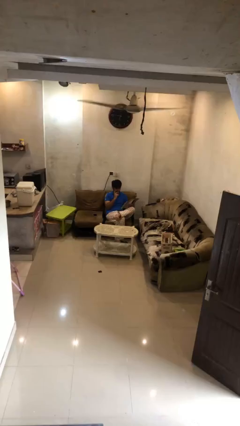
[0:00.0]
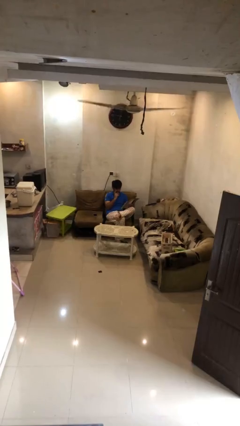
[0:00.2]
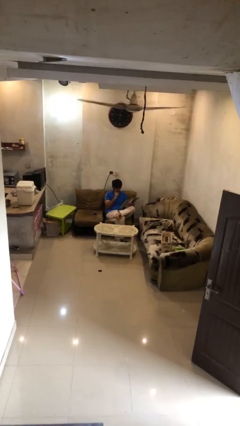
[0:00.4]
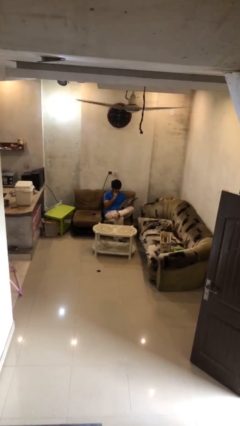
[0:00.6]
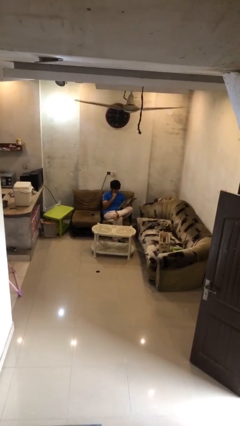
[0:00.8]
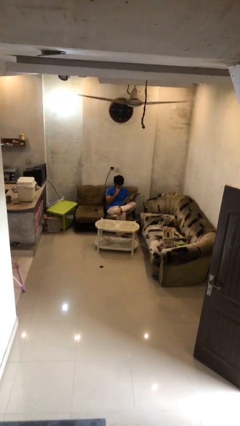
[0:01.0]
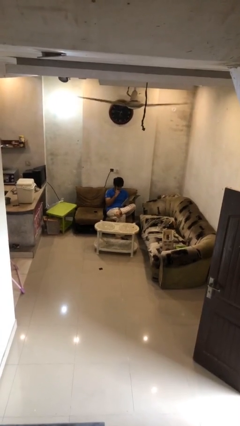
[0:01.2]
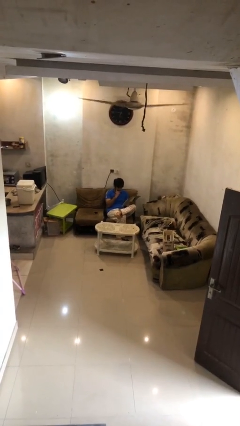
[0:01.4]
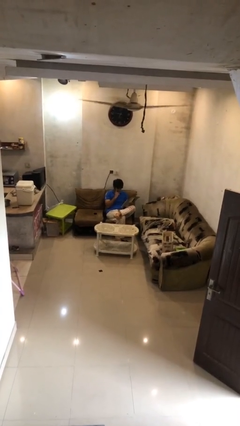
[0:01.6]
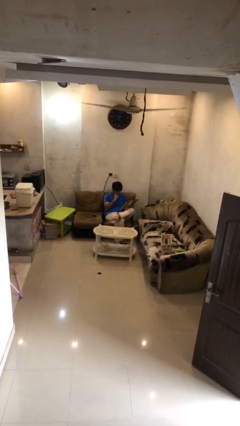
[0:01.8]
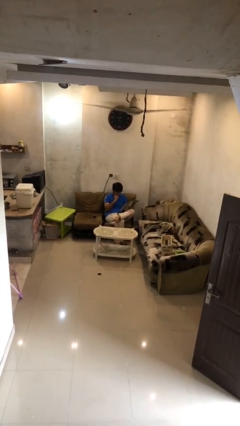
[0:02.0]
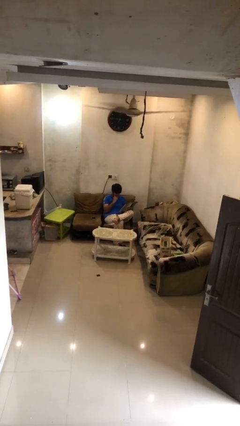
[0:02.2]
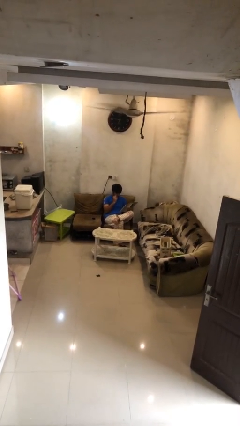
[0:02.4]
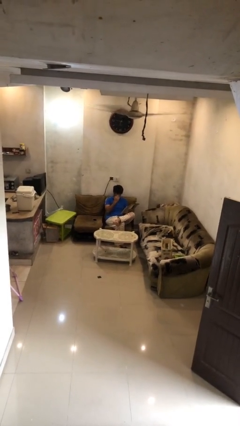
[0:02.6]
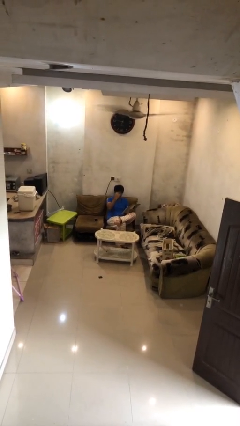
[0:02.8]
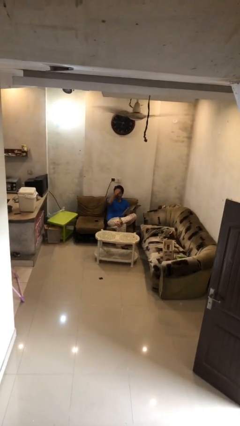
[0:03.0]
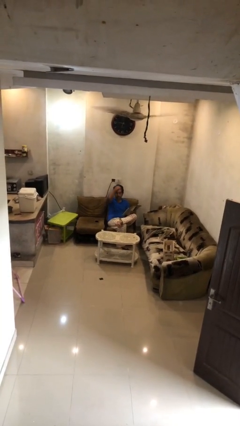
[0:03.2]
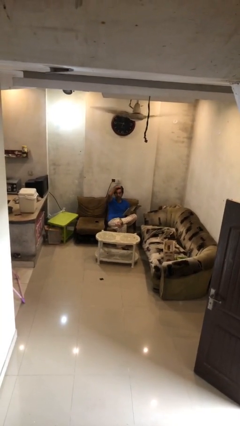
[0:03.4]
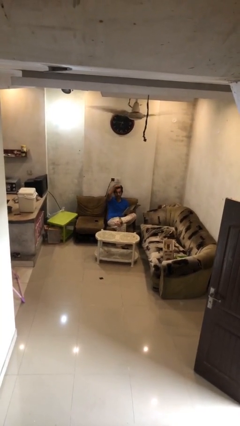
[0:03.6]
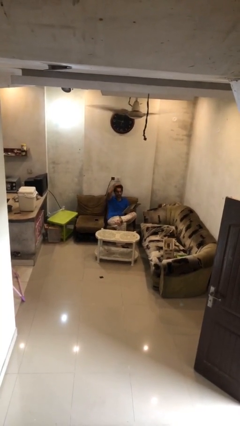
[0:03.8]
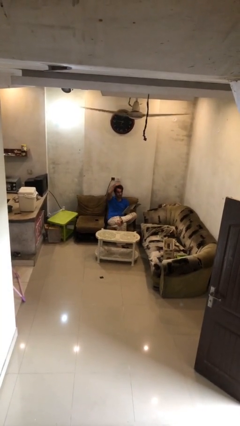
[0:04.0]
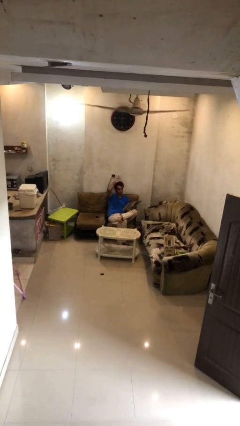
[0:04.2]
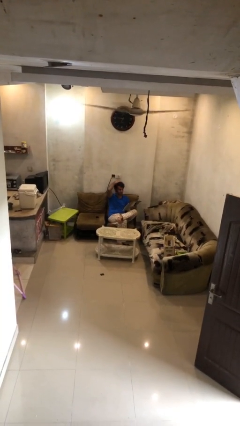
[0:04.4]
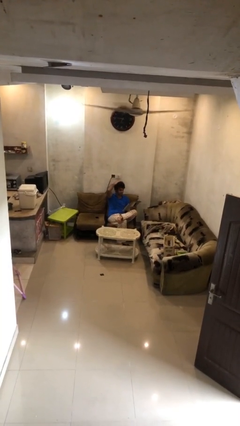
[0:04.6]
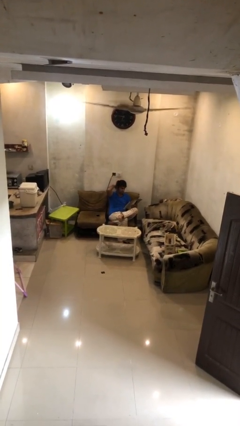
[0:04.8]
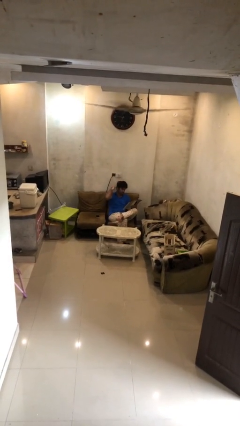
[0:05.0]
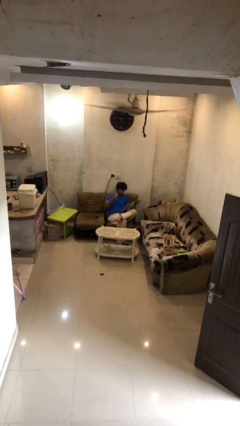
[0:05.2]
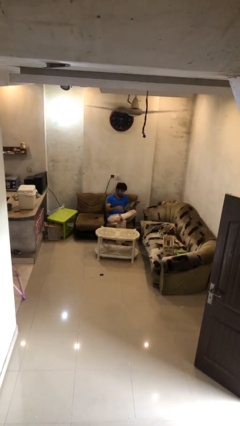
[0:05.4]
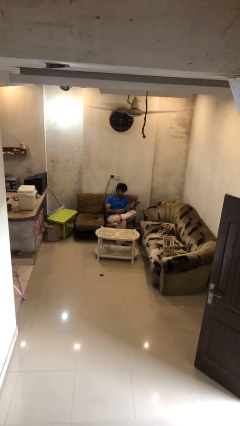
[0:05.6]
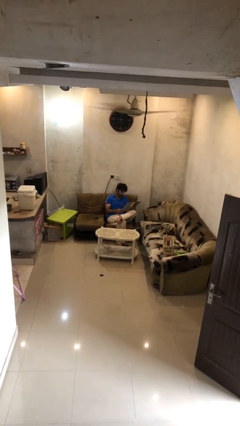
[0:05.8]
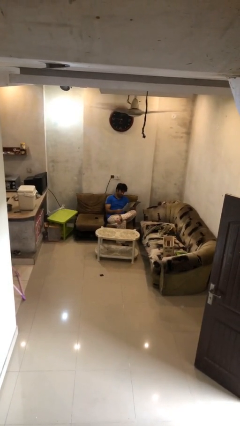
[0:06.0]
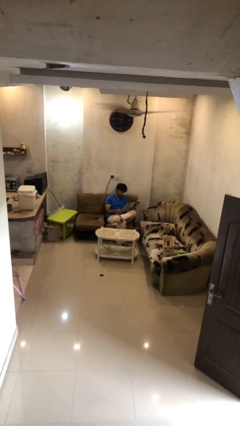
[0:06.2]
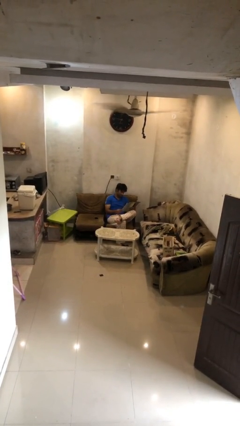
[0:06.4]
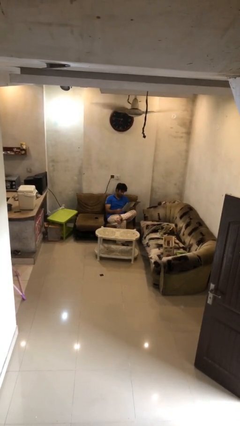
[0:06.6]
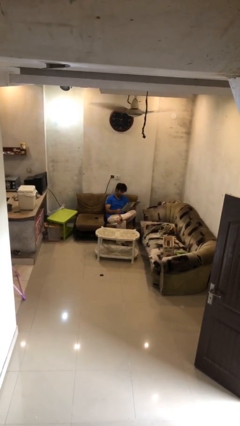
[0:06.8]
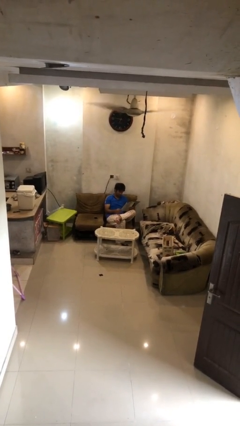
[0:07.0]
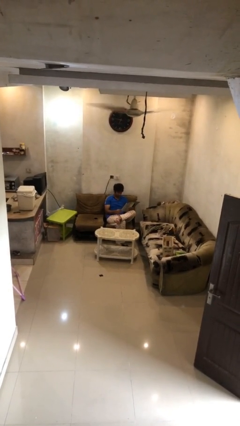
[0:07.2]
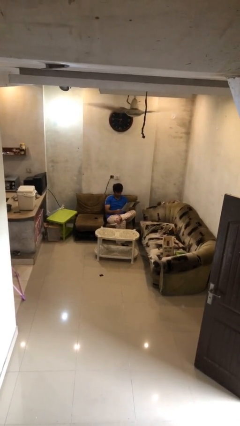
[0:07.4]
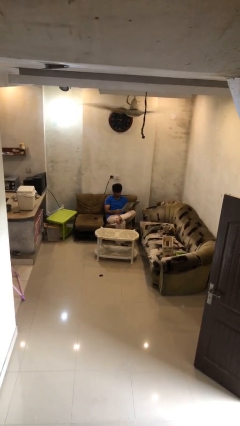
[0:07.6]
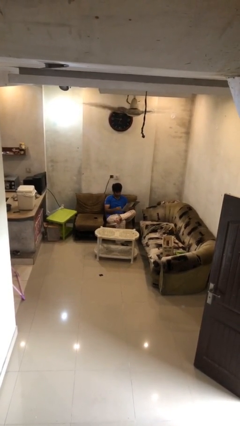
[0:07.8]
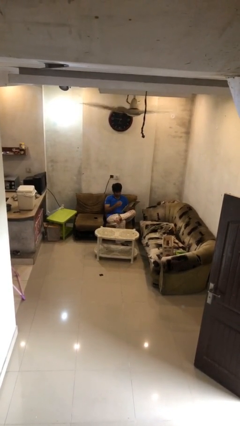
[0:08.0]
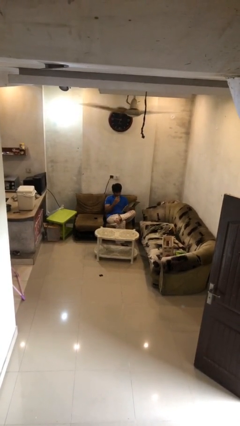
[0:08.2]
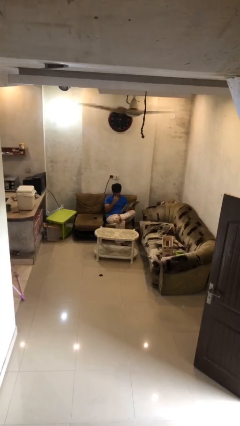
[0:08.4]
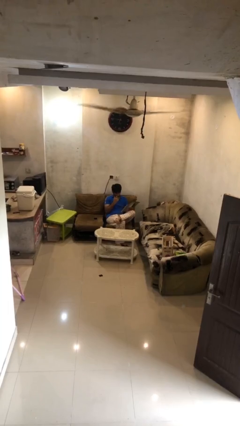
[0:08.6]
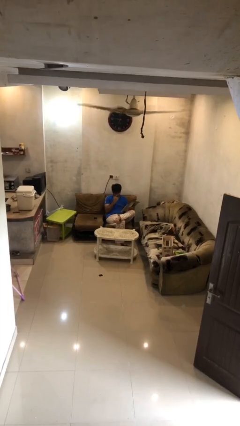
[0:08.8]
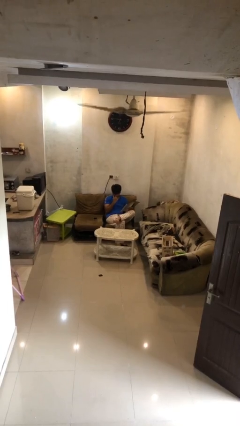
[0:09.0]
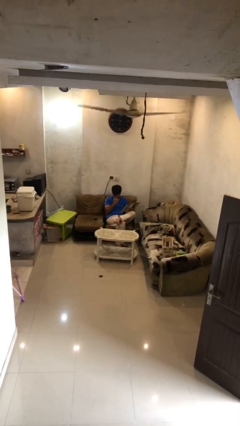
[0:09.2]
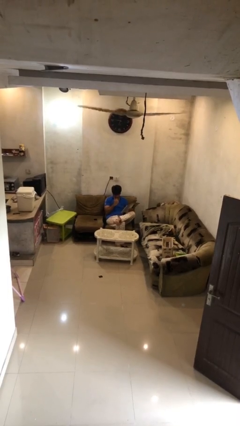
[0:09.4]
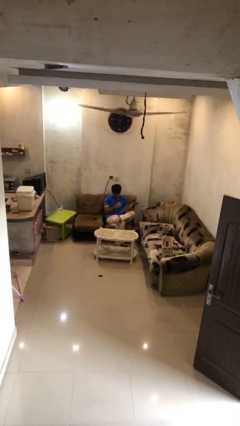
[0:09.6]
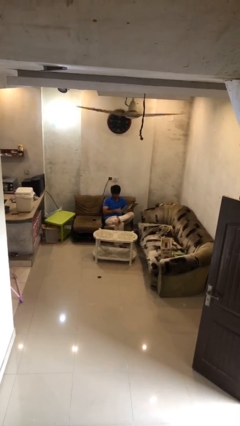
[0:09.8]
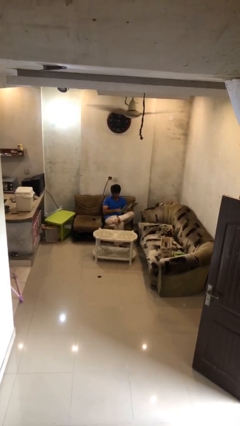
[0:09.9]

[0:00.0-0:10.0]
person reads document

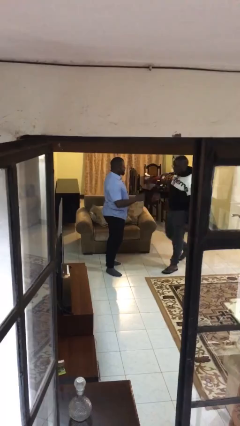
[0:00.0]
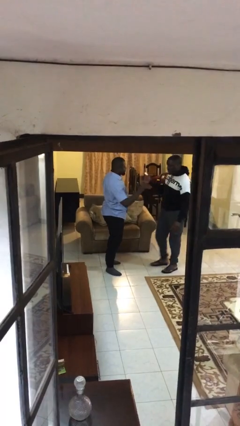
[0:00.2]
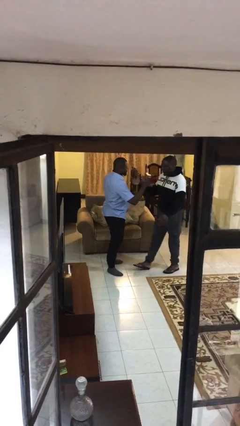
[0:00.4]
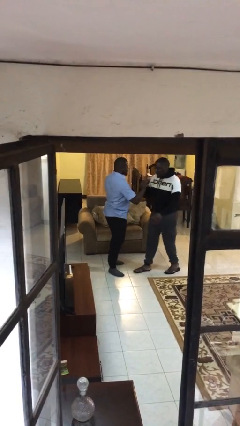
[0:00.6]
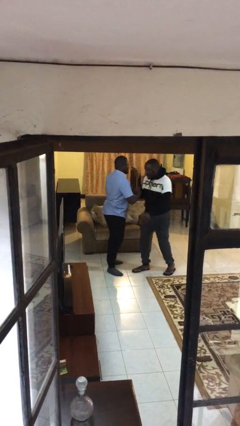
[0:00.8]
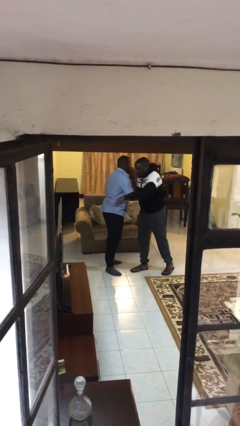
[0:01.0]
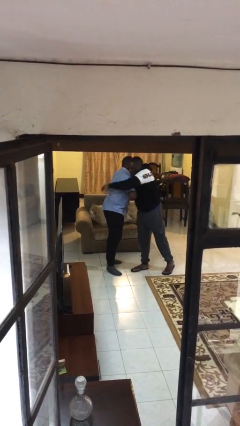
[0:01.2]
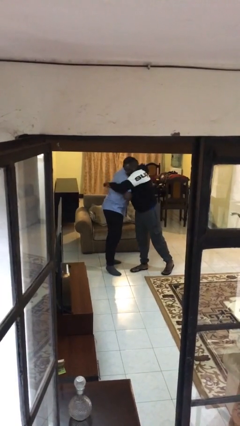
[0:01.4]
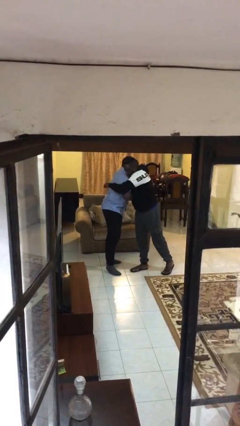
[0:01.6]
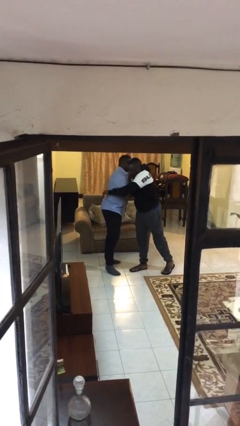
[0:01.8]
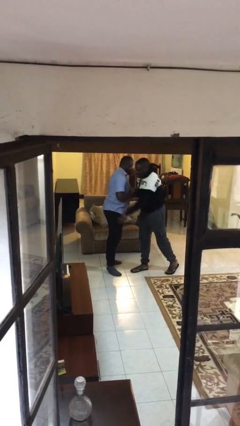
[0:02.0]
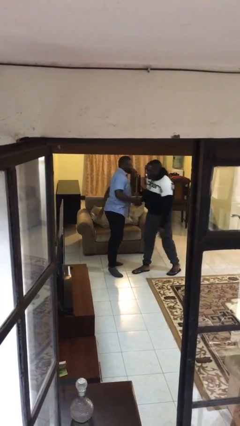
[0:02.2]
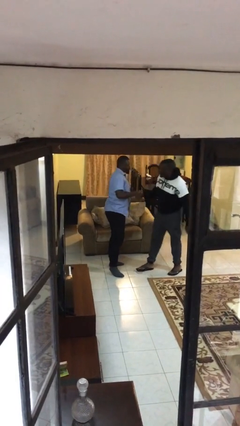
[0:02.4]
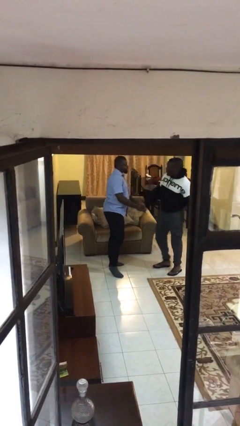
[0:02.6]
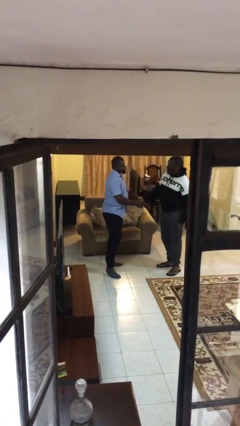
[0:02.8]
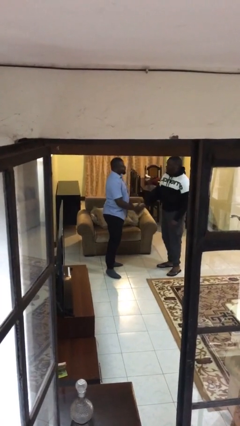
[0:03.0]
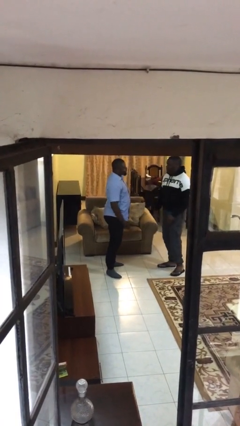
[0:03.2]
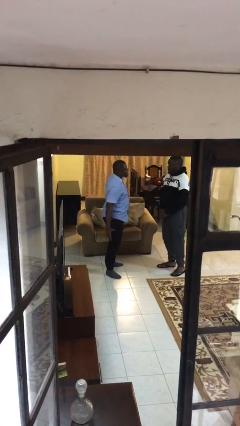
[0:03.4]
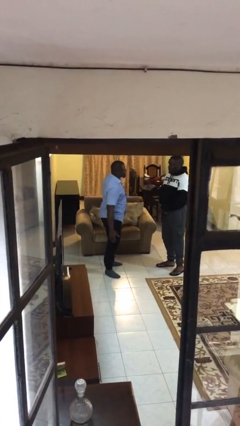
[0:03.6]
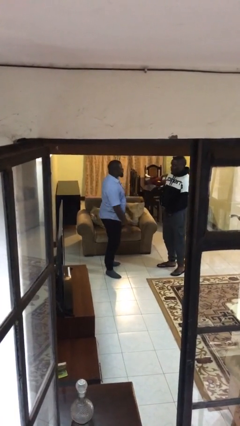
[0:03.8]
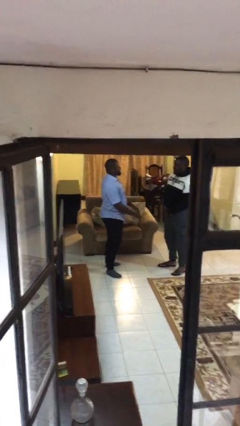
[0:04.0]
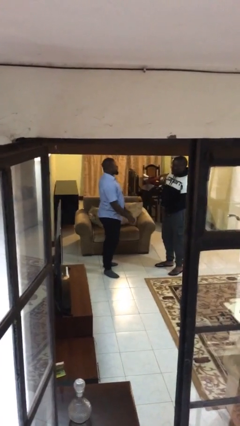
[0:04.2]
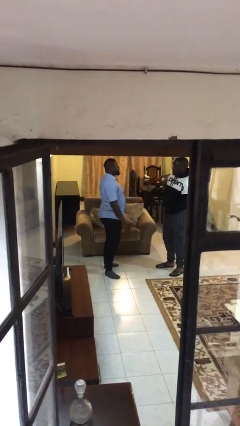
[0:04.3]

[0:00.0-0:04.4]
person embraces person

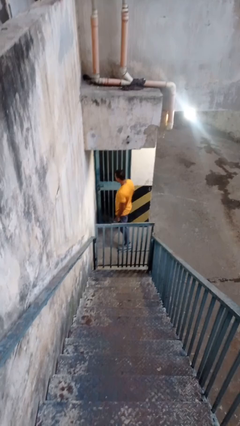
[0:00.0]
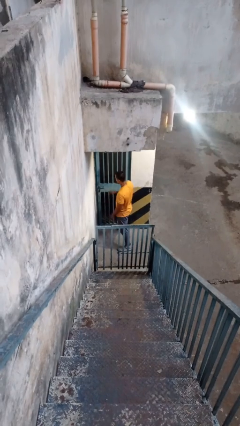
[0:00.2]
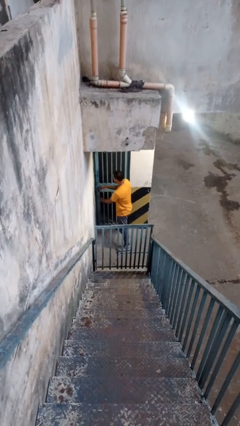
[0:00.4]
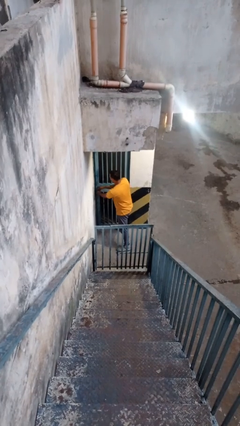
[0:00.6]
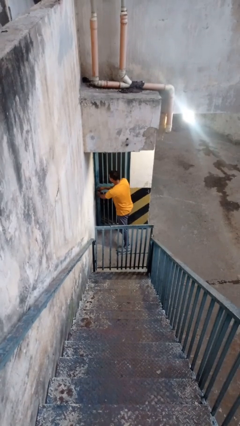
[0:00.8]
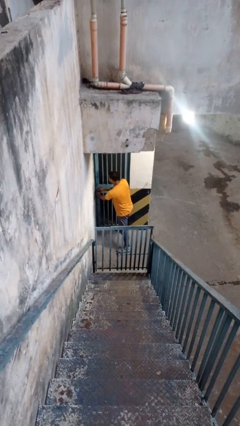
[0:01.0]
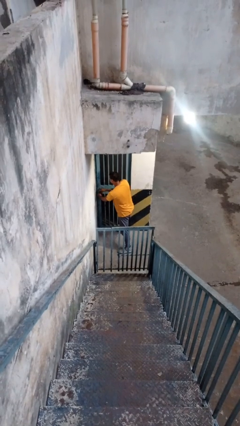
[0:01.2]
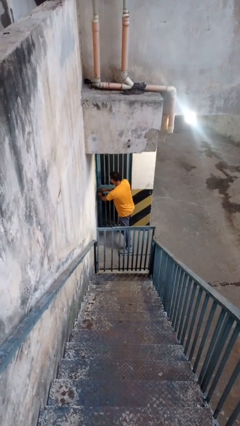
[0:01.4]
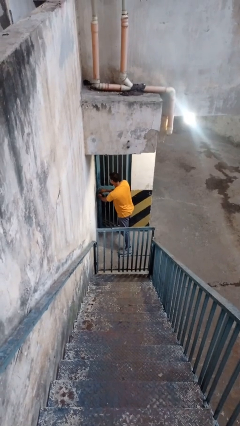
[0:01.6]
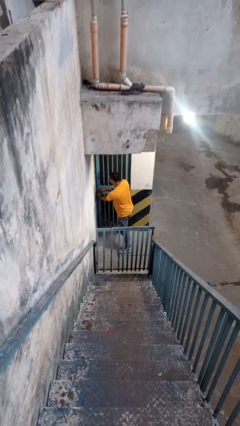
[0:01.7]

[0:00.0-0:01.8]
person unlocks door with keys

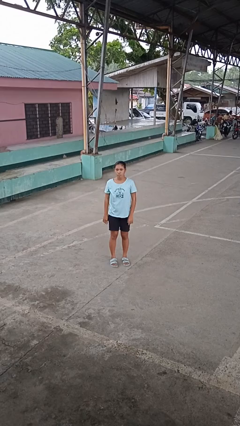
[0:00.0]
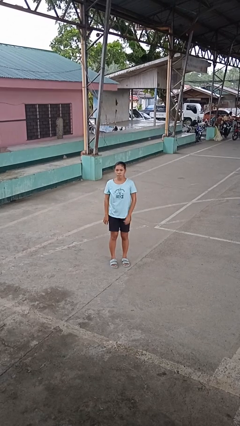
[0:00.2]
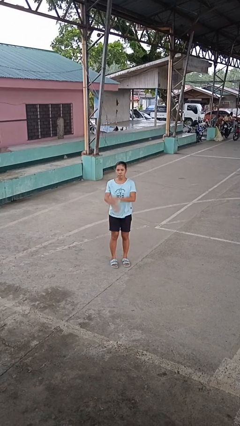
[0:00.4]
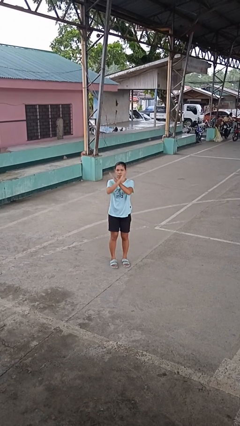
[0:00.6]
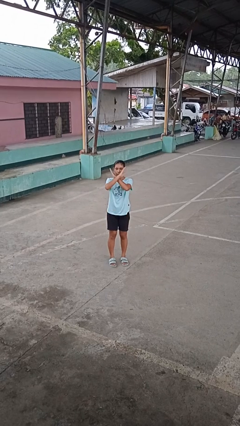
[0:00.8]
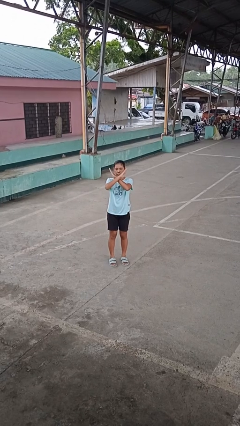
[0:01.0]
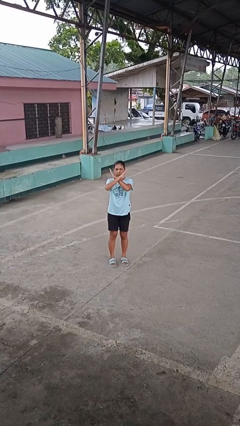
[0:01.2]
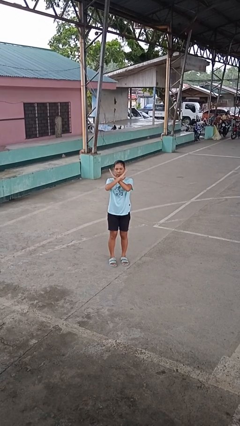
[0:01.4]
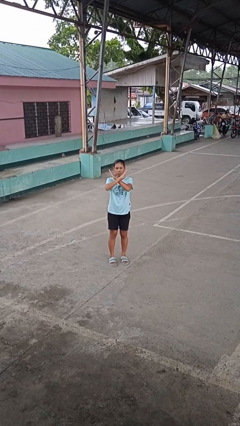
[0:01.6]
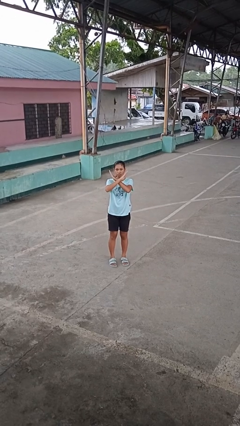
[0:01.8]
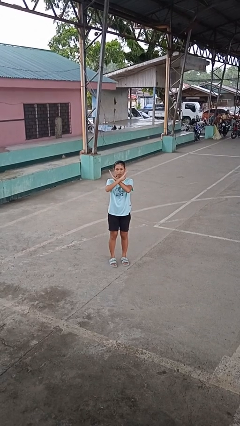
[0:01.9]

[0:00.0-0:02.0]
person gestures arms x
